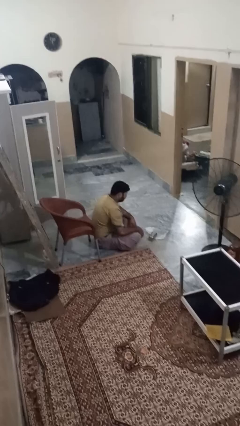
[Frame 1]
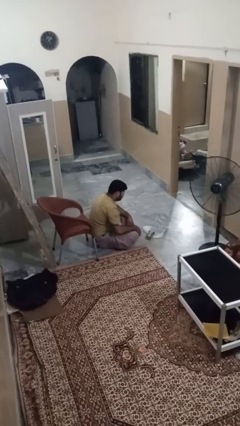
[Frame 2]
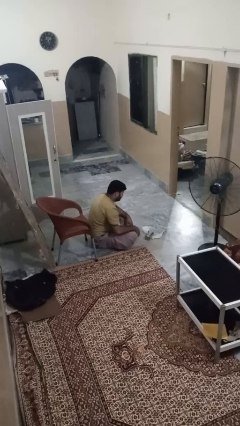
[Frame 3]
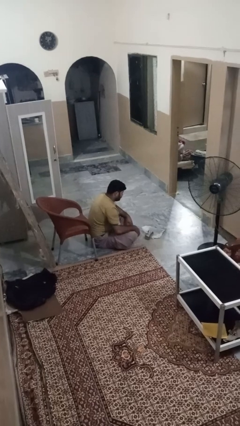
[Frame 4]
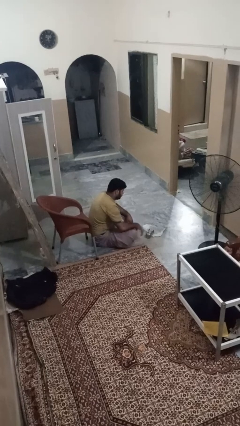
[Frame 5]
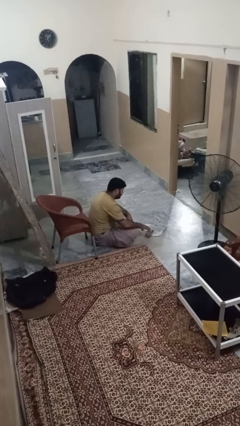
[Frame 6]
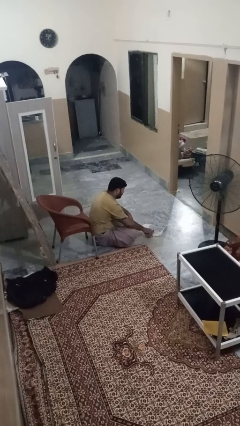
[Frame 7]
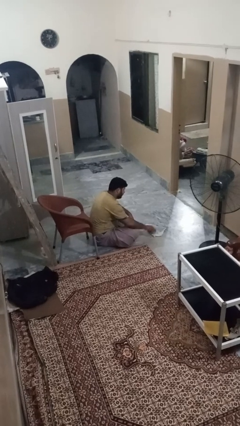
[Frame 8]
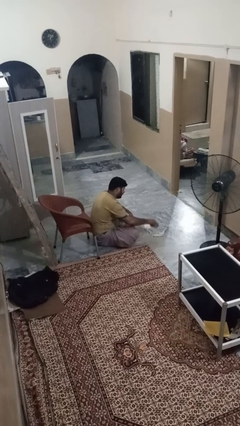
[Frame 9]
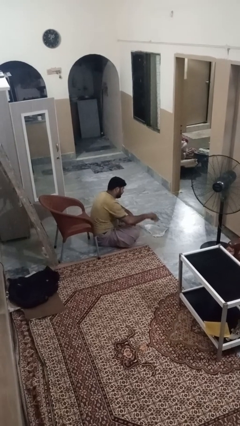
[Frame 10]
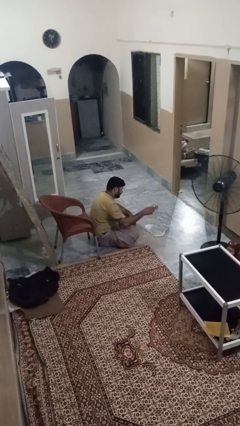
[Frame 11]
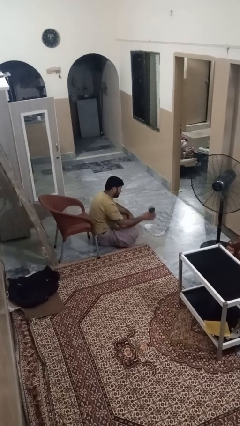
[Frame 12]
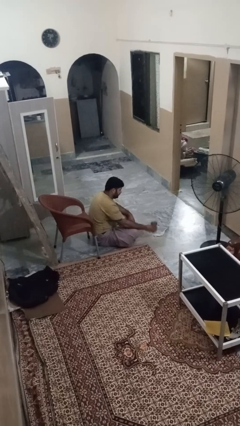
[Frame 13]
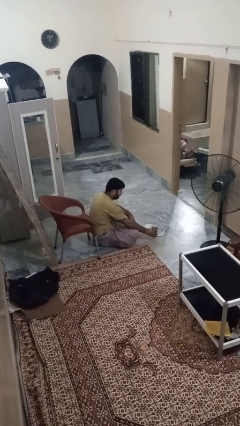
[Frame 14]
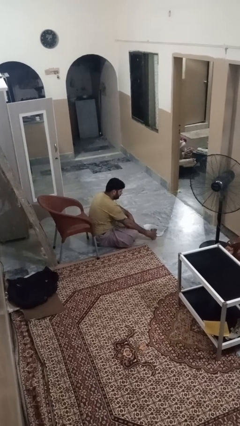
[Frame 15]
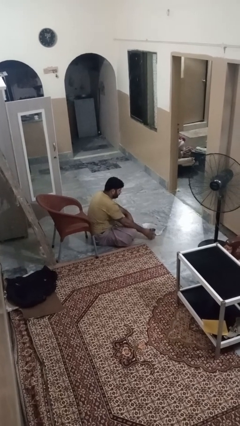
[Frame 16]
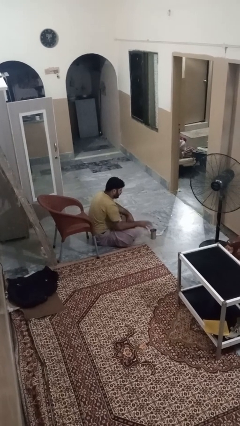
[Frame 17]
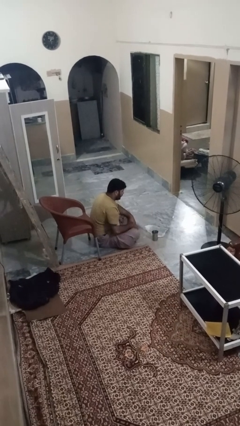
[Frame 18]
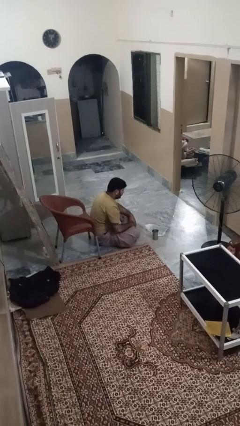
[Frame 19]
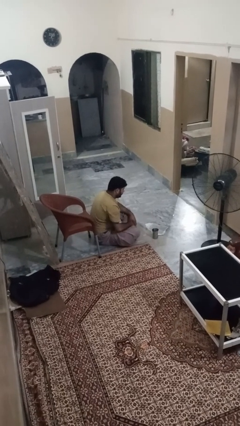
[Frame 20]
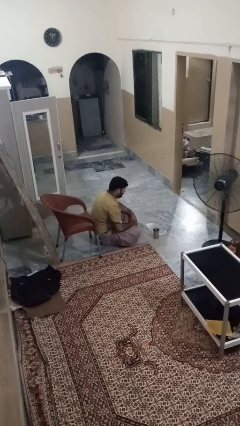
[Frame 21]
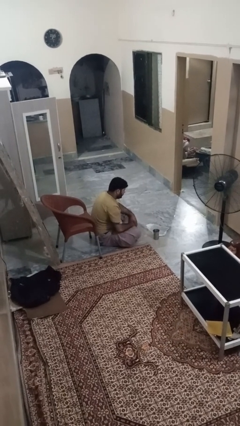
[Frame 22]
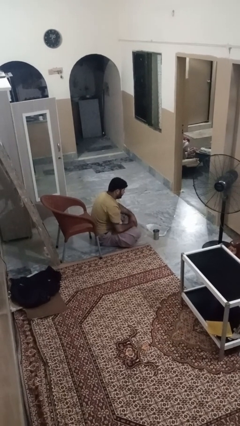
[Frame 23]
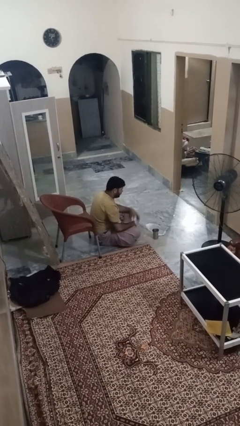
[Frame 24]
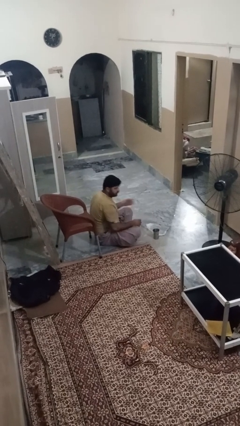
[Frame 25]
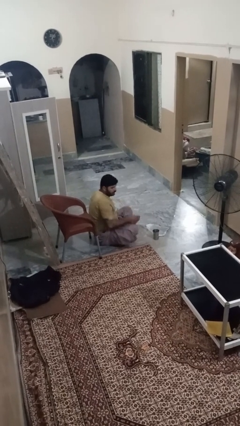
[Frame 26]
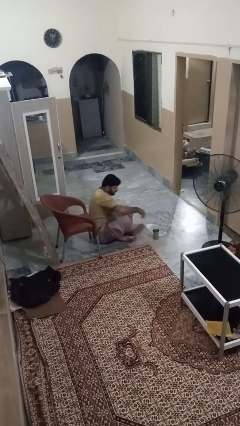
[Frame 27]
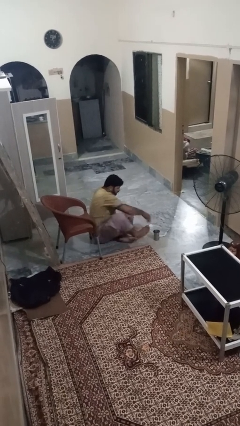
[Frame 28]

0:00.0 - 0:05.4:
person sets upright glass

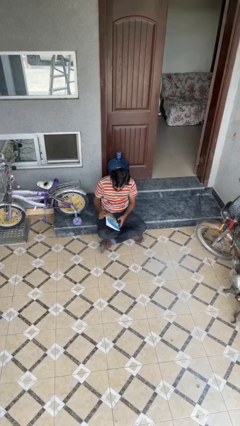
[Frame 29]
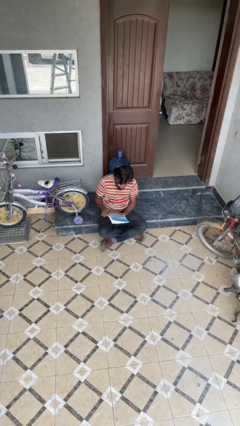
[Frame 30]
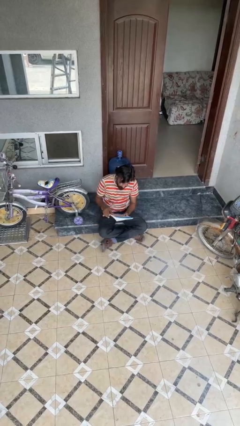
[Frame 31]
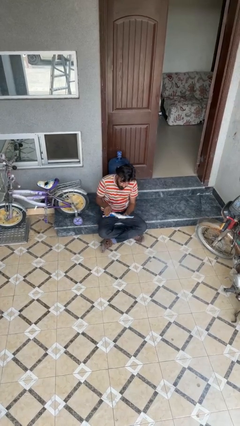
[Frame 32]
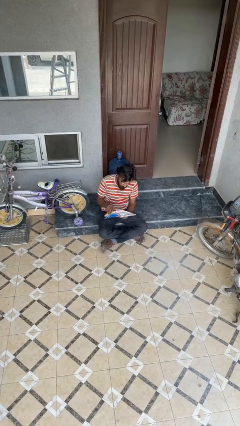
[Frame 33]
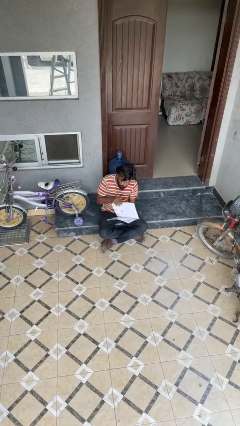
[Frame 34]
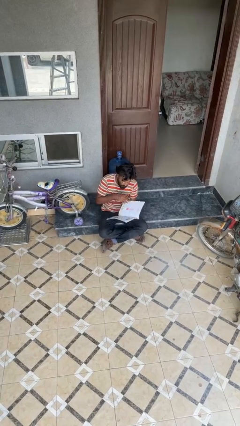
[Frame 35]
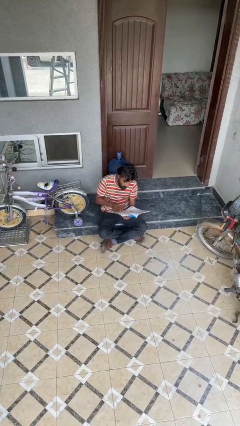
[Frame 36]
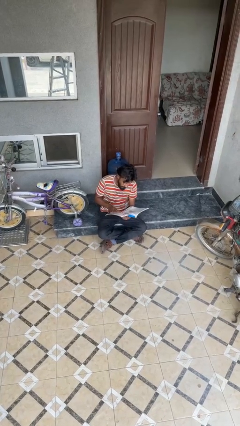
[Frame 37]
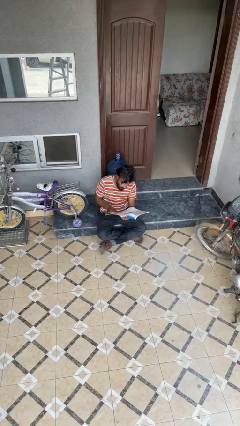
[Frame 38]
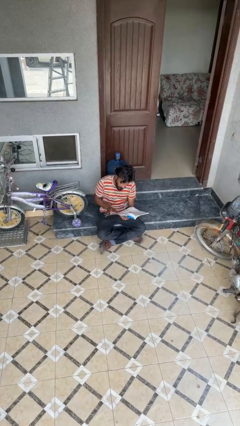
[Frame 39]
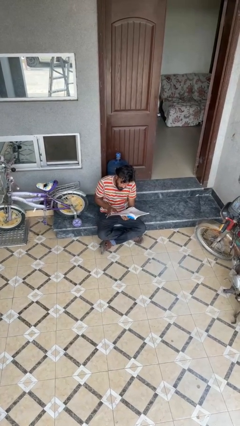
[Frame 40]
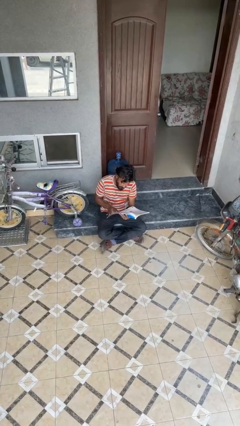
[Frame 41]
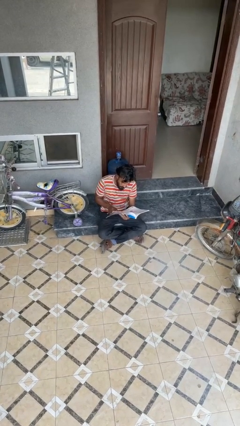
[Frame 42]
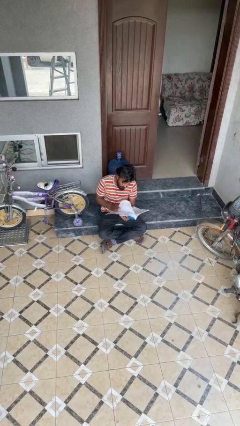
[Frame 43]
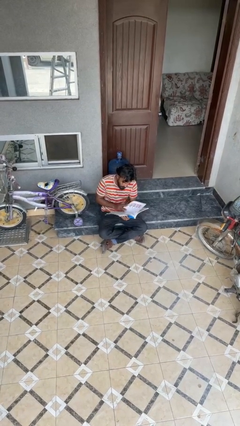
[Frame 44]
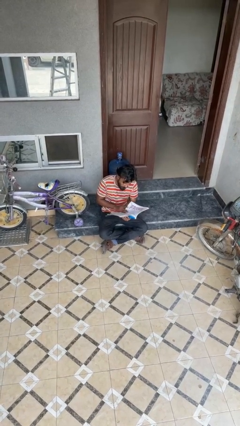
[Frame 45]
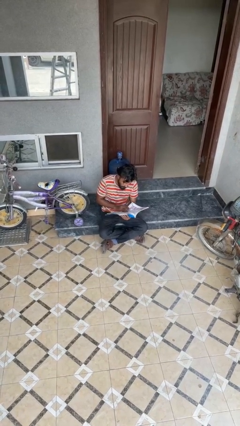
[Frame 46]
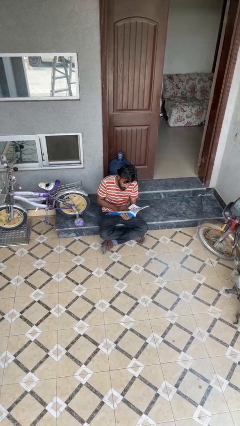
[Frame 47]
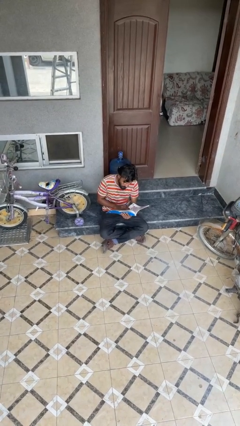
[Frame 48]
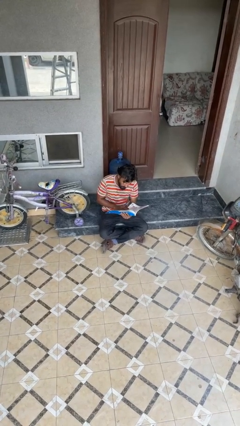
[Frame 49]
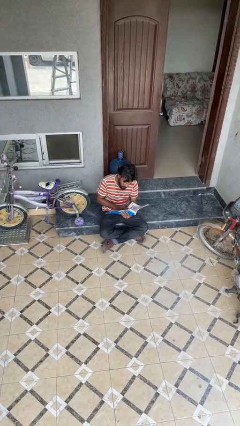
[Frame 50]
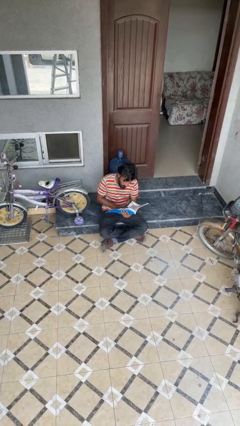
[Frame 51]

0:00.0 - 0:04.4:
person reads book

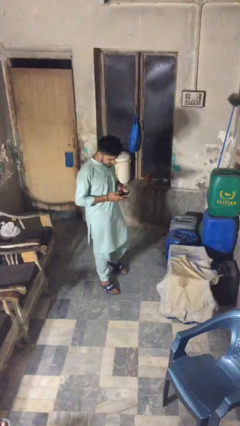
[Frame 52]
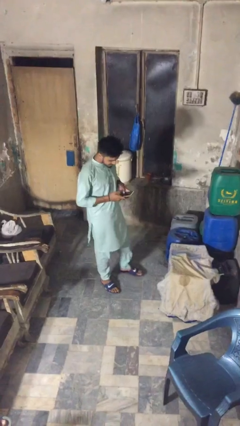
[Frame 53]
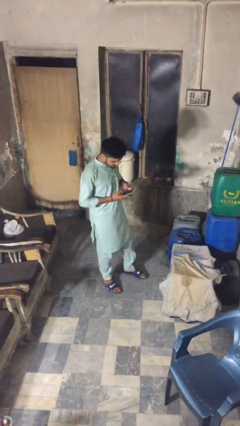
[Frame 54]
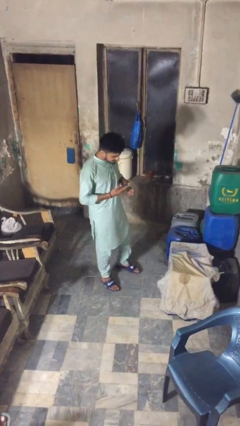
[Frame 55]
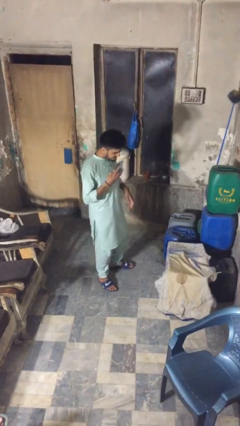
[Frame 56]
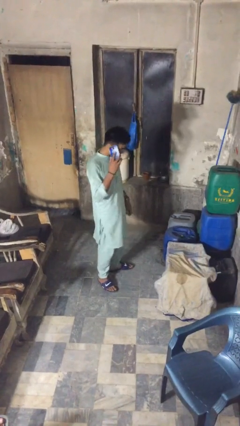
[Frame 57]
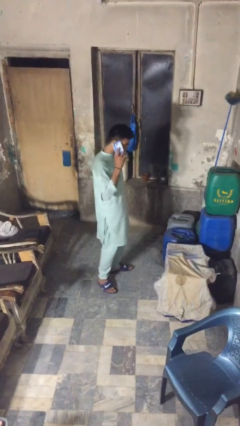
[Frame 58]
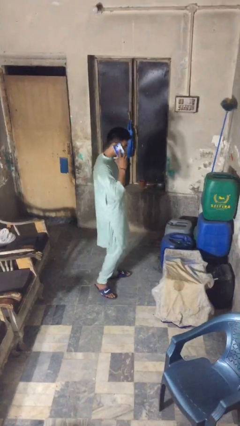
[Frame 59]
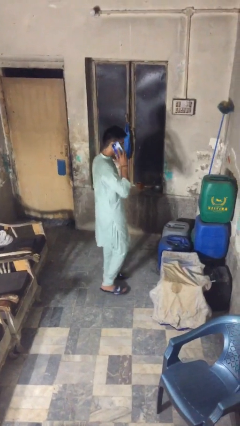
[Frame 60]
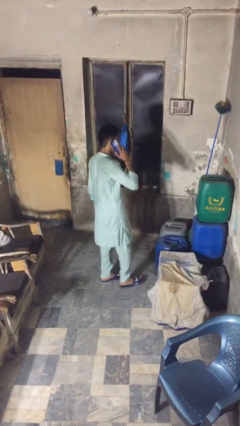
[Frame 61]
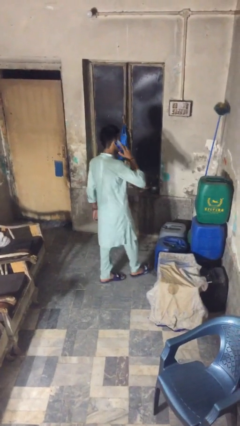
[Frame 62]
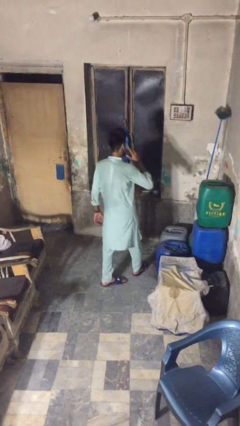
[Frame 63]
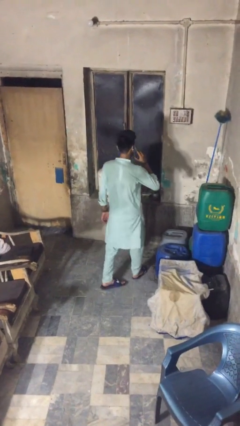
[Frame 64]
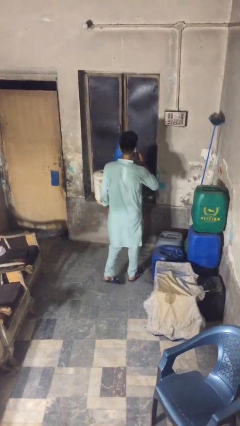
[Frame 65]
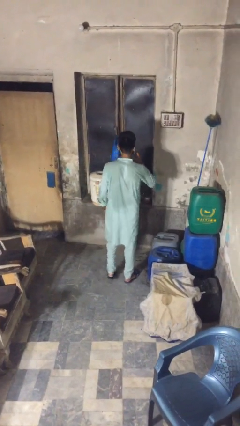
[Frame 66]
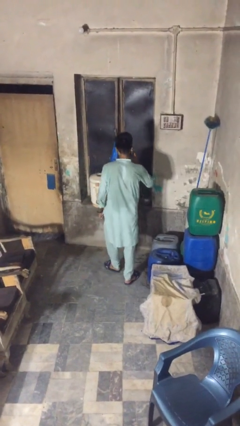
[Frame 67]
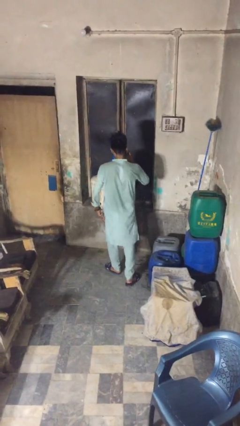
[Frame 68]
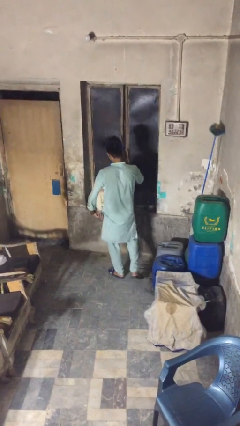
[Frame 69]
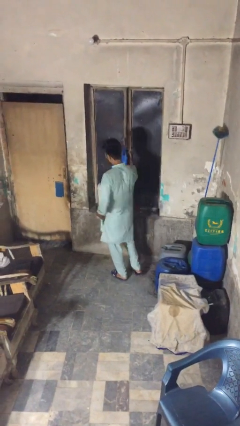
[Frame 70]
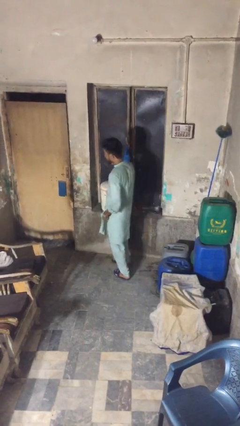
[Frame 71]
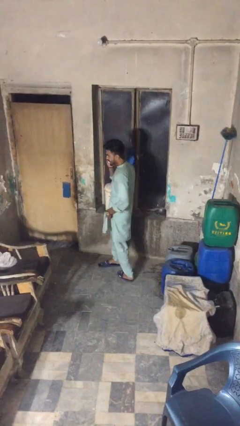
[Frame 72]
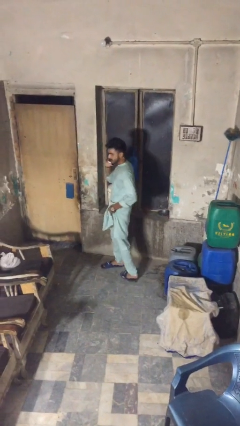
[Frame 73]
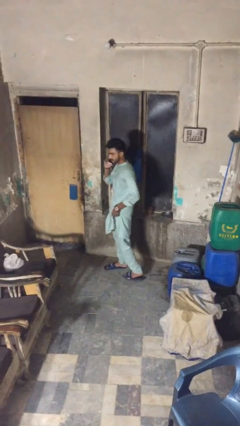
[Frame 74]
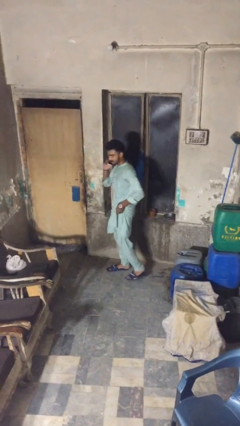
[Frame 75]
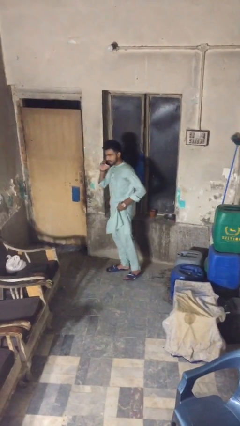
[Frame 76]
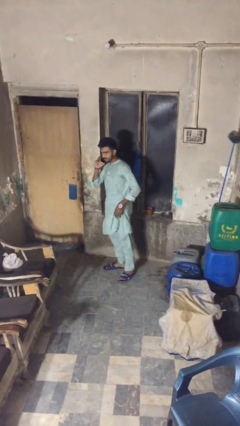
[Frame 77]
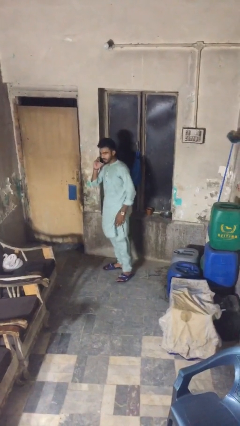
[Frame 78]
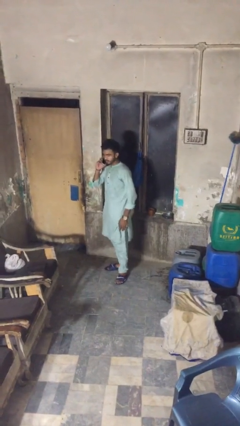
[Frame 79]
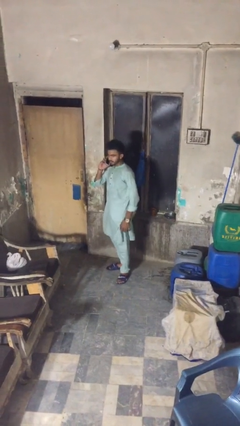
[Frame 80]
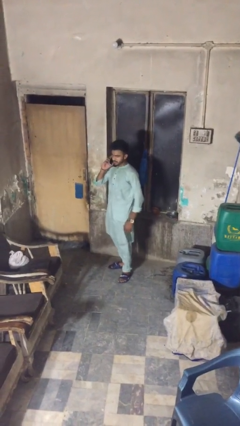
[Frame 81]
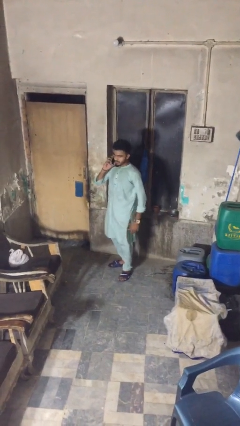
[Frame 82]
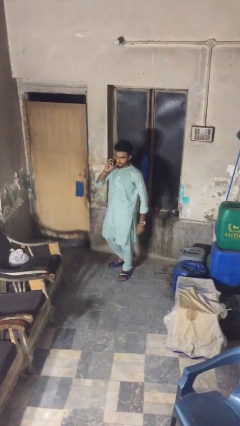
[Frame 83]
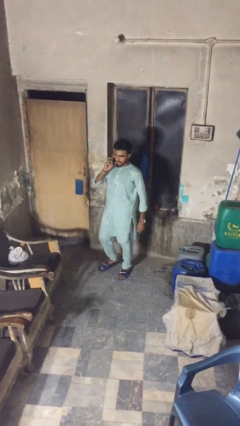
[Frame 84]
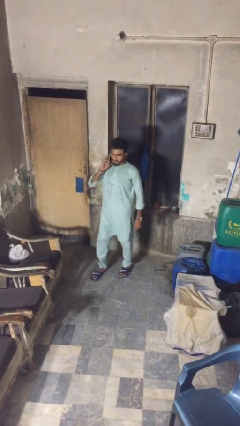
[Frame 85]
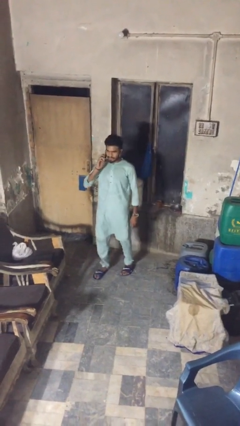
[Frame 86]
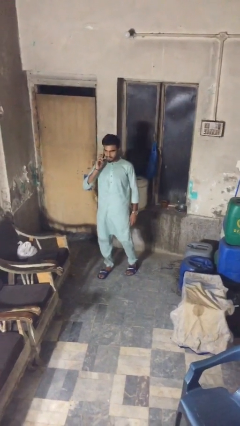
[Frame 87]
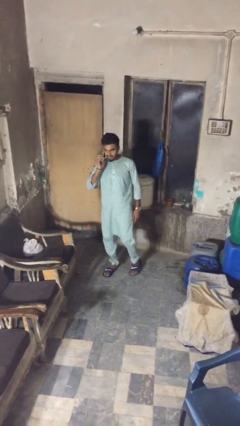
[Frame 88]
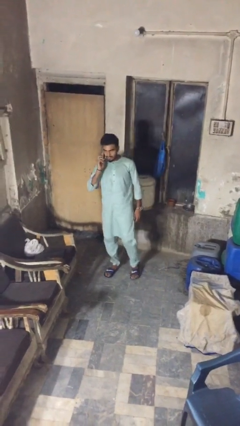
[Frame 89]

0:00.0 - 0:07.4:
person talks on phone

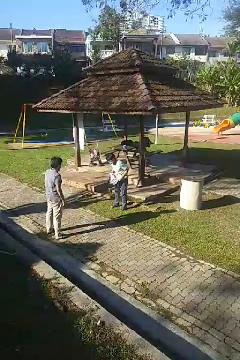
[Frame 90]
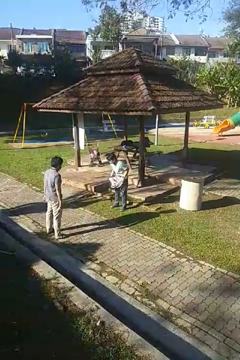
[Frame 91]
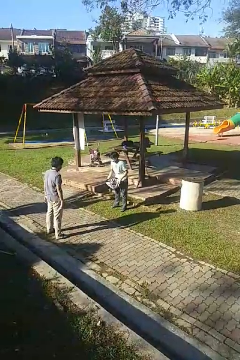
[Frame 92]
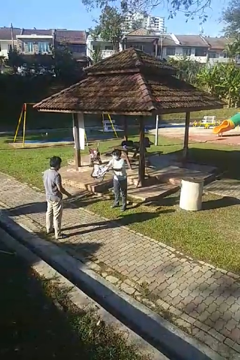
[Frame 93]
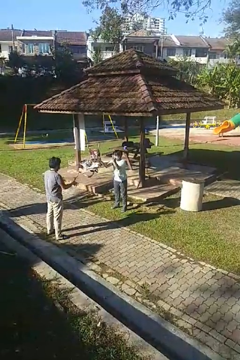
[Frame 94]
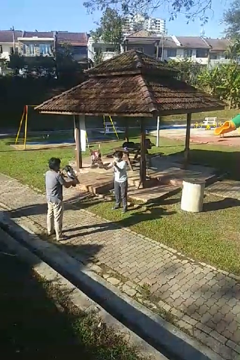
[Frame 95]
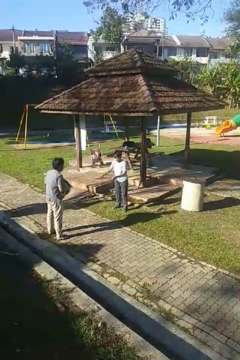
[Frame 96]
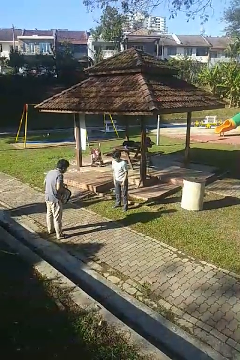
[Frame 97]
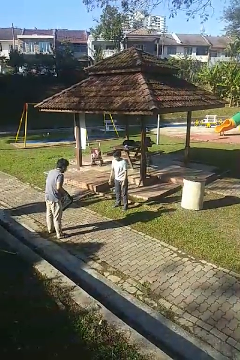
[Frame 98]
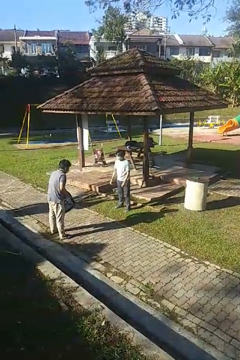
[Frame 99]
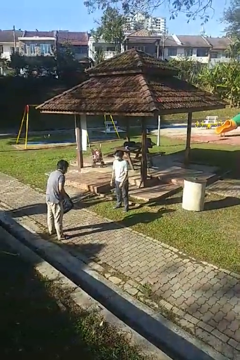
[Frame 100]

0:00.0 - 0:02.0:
person throws object to person
